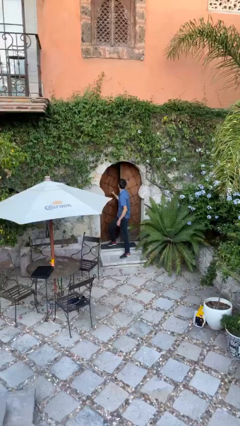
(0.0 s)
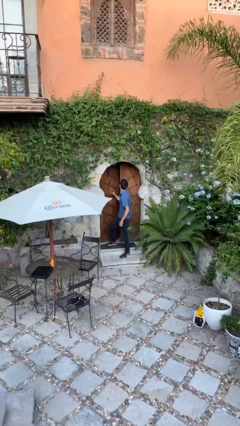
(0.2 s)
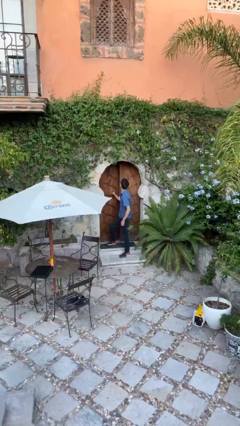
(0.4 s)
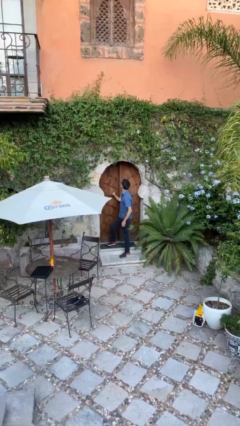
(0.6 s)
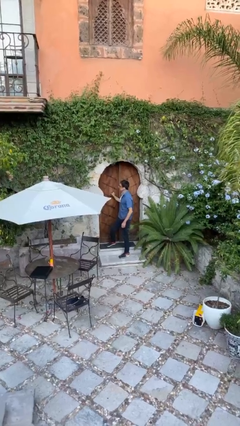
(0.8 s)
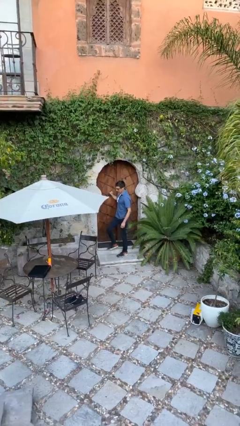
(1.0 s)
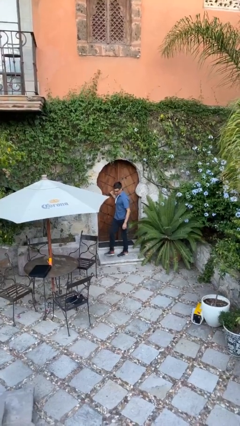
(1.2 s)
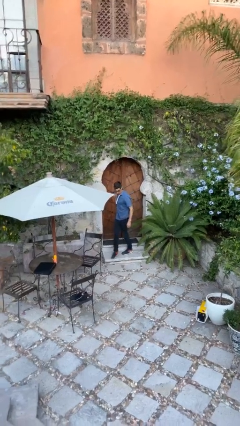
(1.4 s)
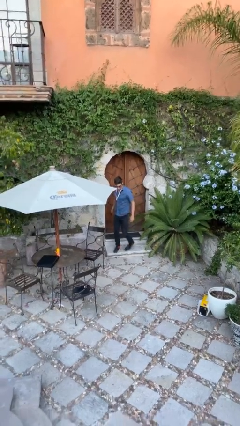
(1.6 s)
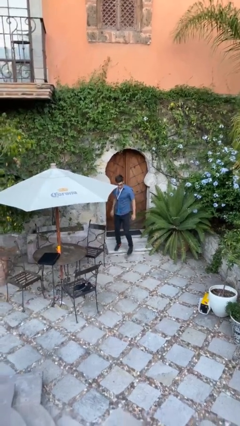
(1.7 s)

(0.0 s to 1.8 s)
person closes facility door

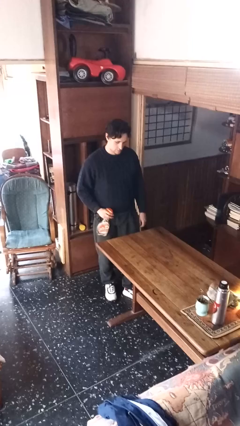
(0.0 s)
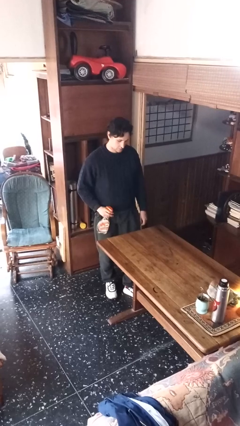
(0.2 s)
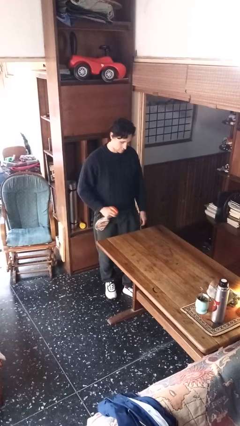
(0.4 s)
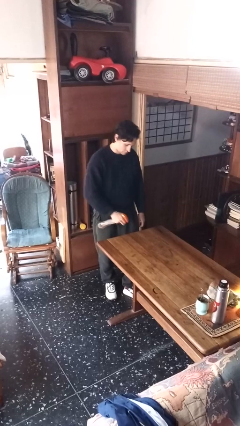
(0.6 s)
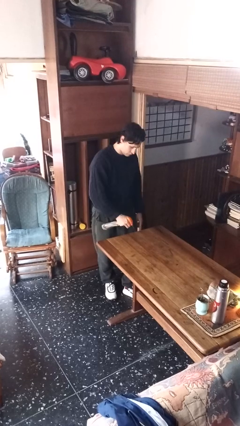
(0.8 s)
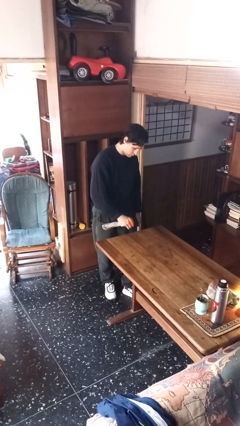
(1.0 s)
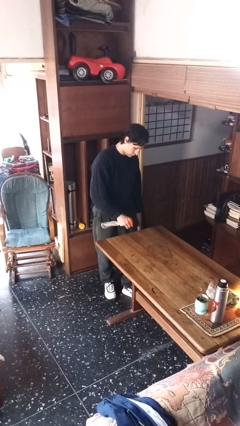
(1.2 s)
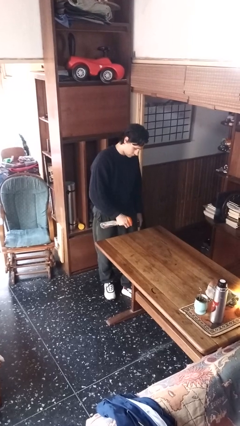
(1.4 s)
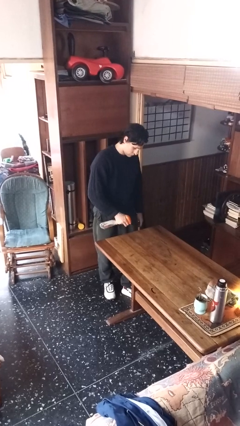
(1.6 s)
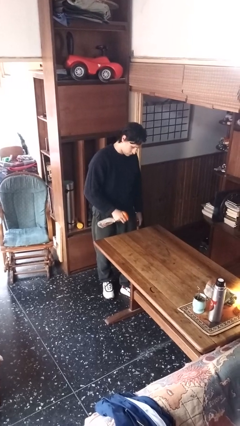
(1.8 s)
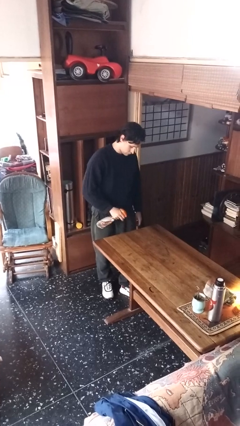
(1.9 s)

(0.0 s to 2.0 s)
person sprays from bottle

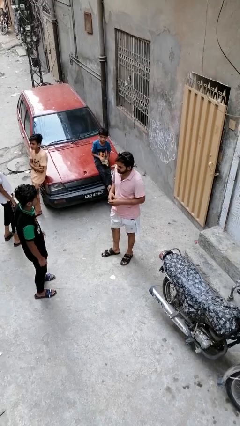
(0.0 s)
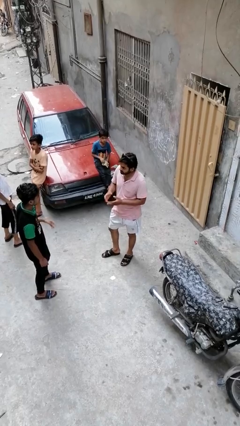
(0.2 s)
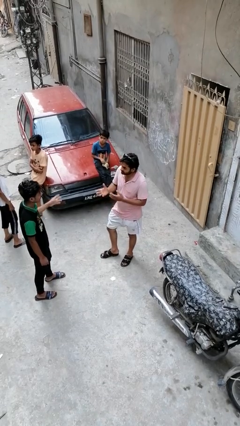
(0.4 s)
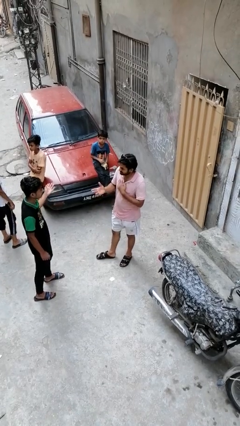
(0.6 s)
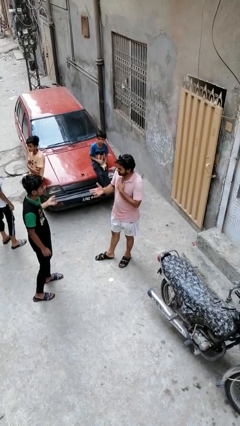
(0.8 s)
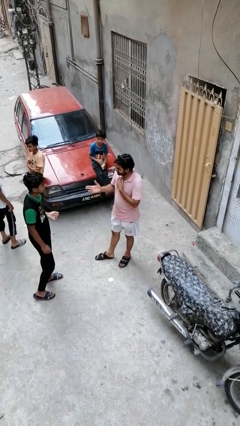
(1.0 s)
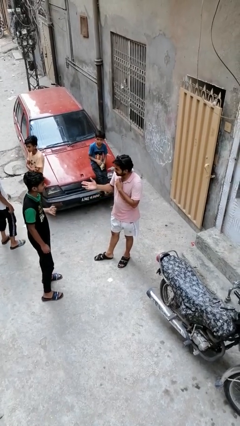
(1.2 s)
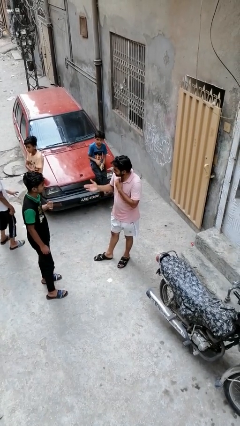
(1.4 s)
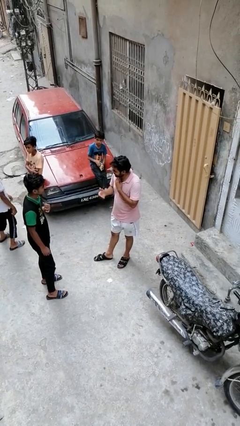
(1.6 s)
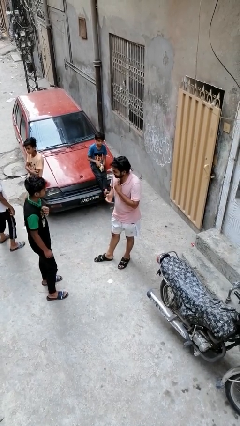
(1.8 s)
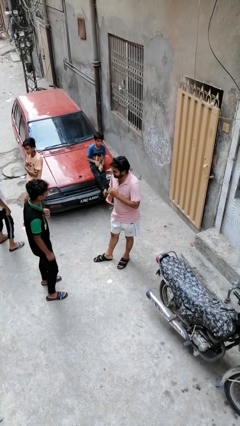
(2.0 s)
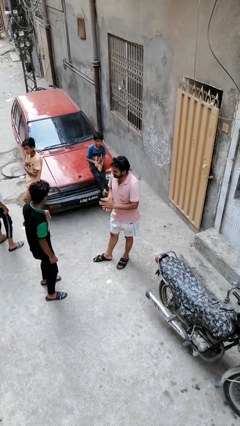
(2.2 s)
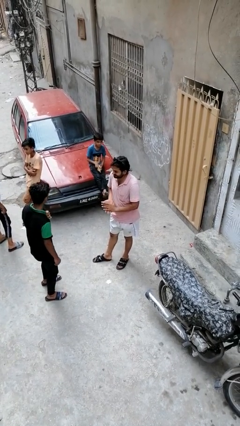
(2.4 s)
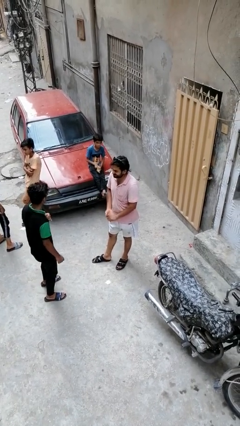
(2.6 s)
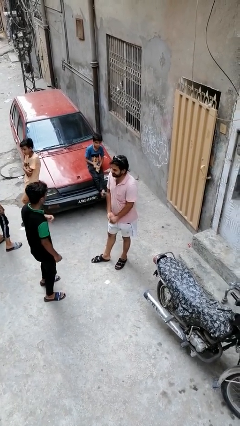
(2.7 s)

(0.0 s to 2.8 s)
person talks to person

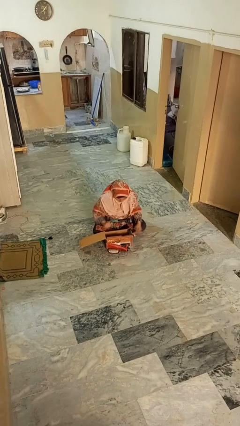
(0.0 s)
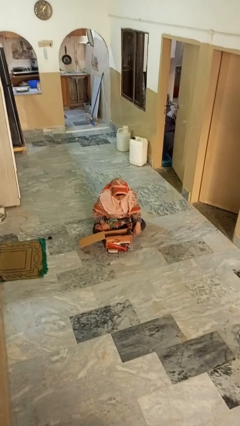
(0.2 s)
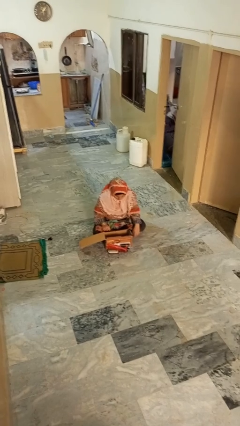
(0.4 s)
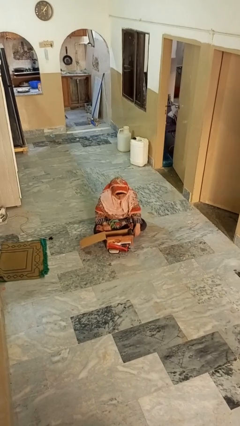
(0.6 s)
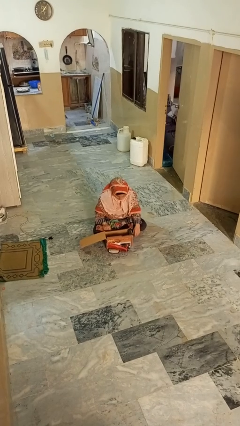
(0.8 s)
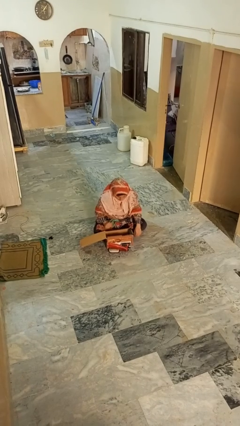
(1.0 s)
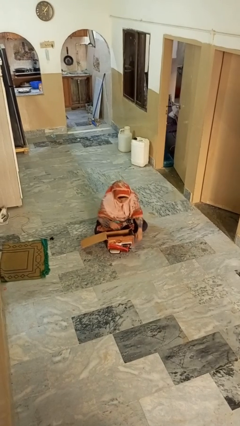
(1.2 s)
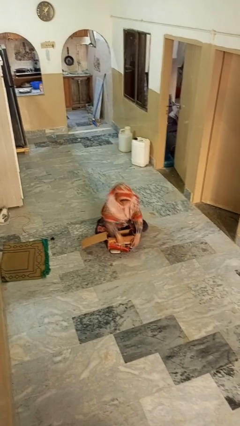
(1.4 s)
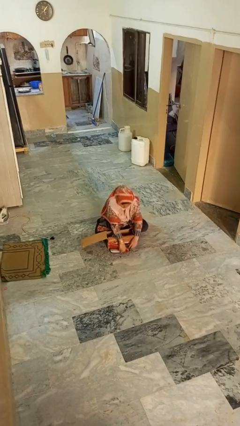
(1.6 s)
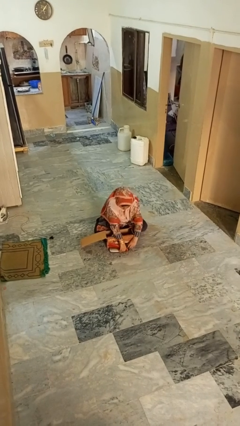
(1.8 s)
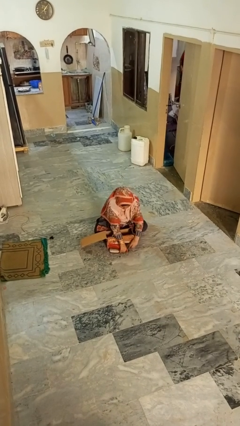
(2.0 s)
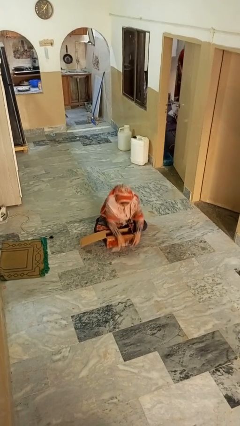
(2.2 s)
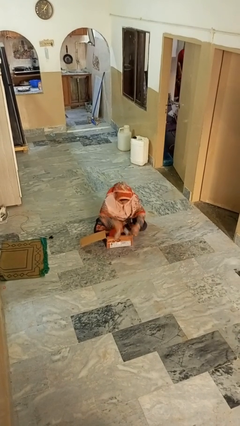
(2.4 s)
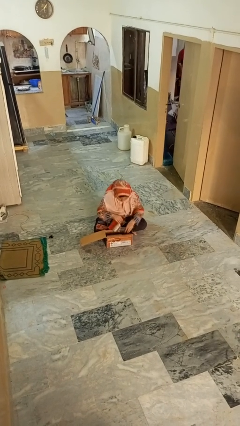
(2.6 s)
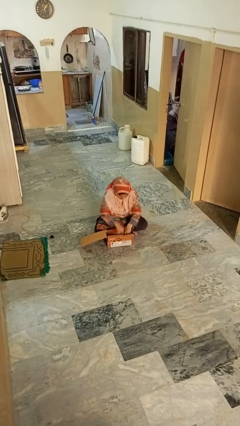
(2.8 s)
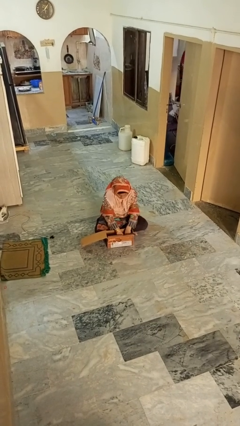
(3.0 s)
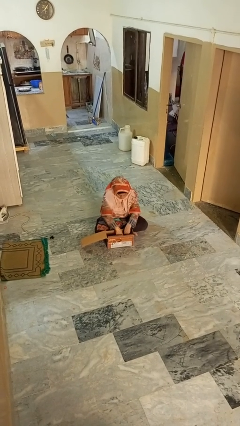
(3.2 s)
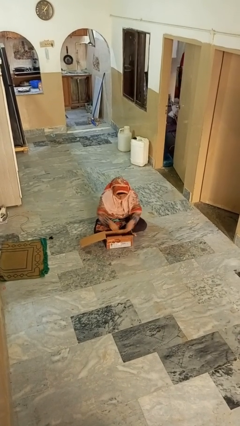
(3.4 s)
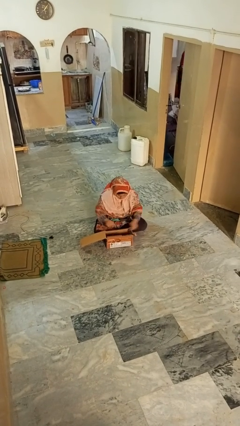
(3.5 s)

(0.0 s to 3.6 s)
person puts object into box

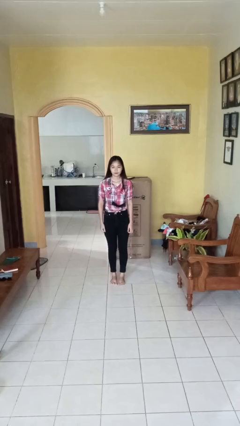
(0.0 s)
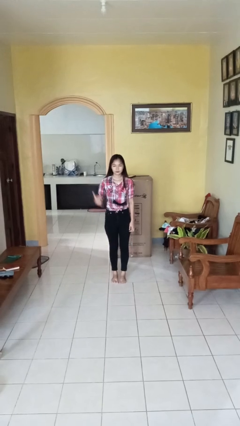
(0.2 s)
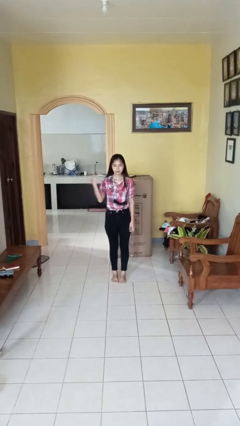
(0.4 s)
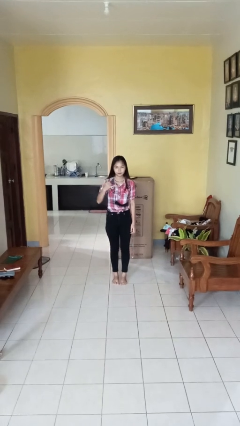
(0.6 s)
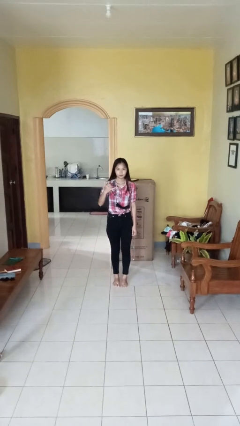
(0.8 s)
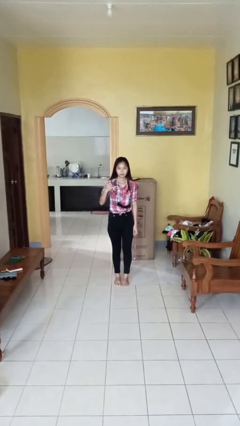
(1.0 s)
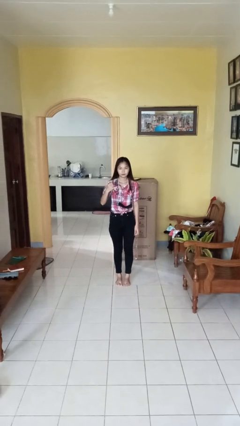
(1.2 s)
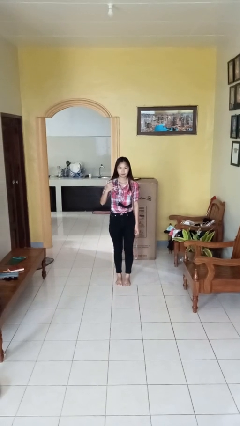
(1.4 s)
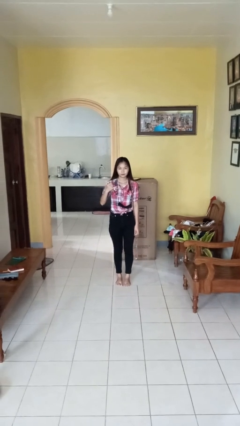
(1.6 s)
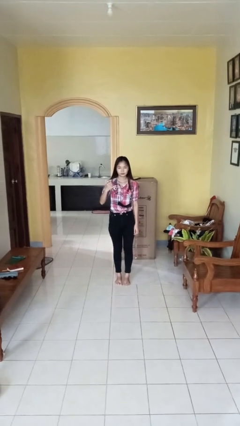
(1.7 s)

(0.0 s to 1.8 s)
person gestures hang loose

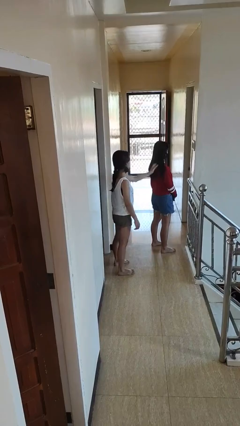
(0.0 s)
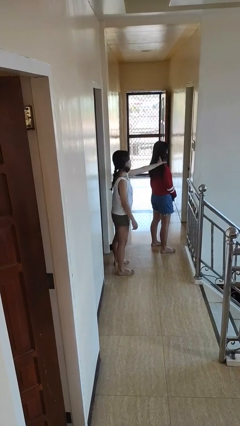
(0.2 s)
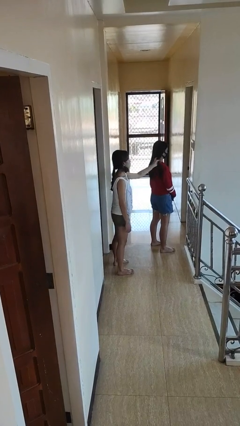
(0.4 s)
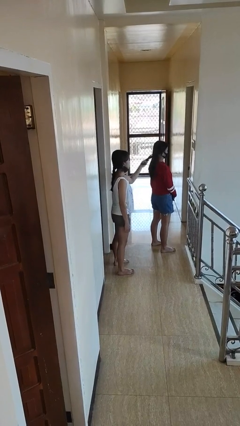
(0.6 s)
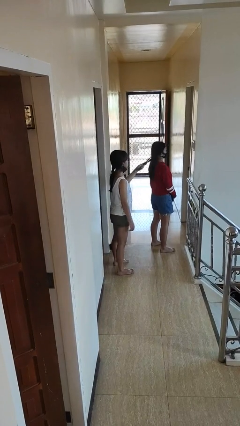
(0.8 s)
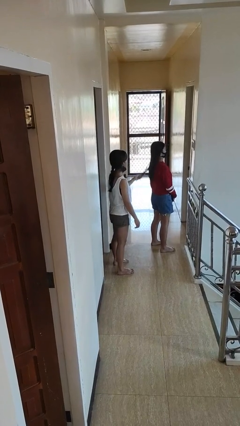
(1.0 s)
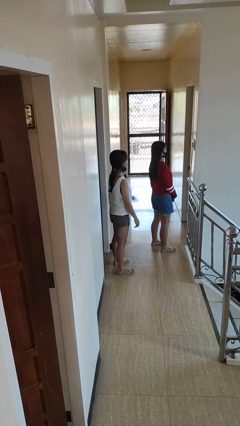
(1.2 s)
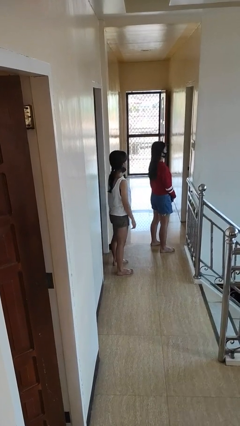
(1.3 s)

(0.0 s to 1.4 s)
person grabs person by hair

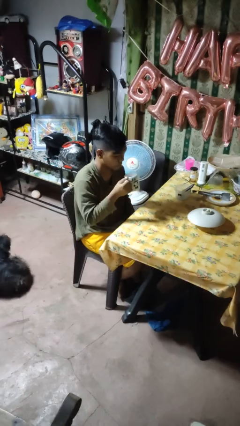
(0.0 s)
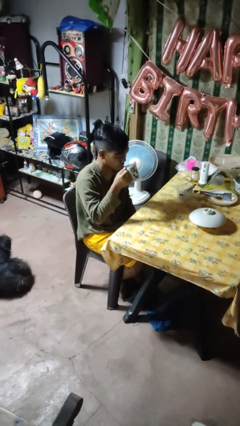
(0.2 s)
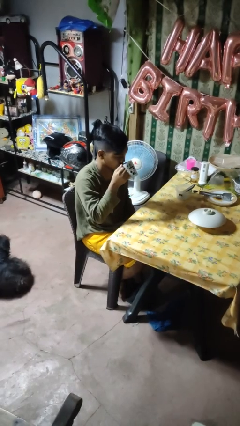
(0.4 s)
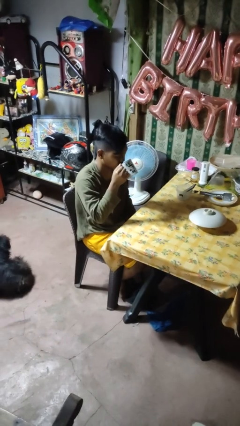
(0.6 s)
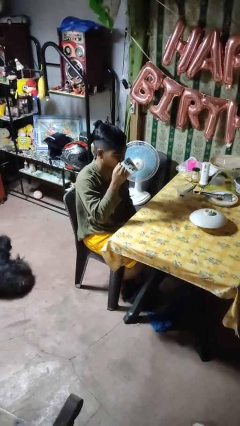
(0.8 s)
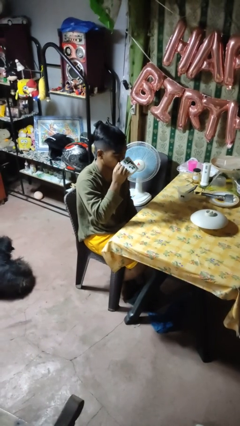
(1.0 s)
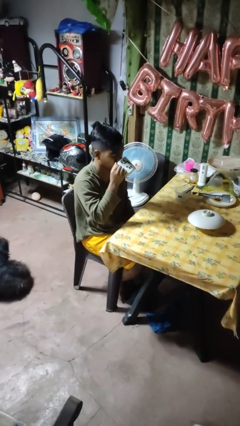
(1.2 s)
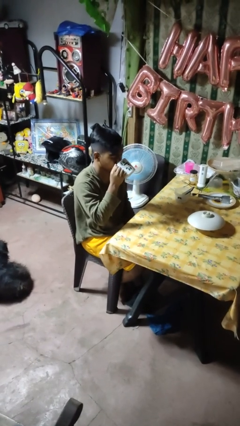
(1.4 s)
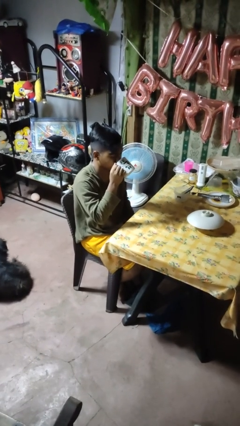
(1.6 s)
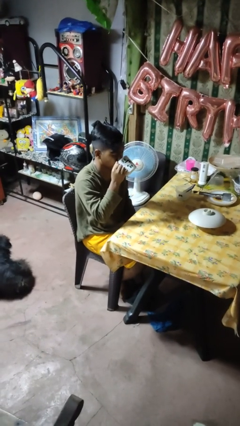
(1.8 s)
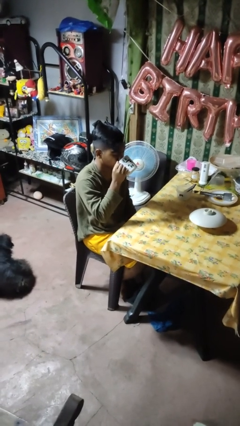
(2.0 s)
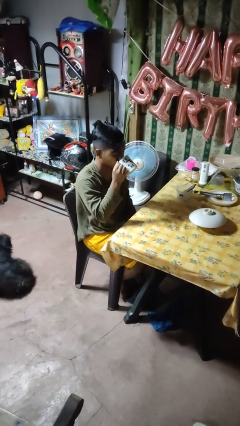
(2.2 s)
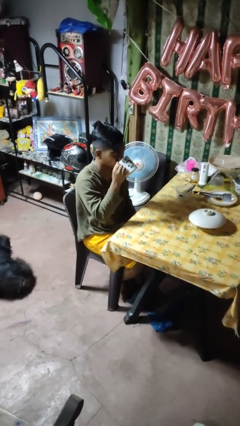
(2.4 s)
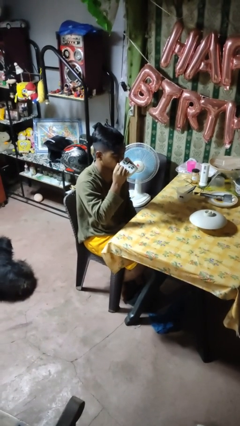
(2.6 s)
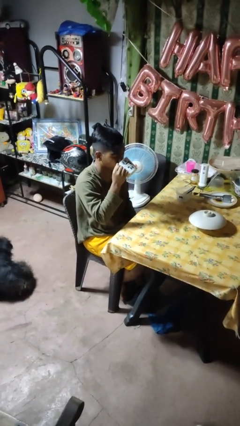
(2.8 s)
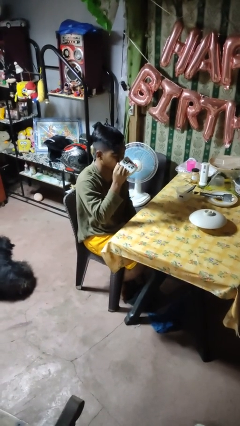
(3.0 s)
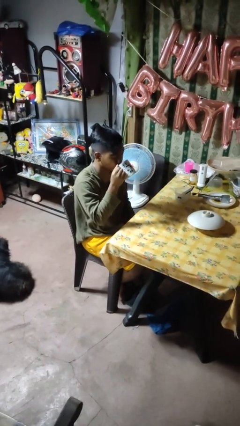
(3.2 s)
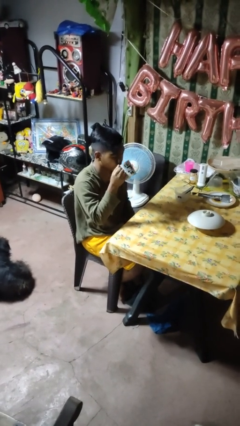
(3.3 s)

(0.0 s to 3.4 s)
person drinks from mug
